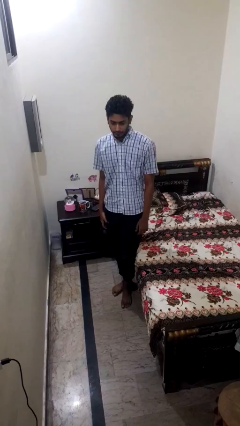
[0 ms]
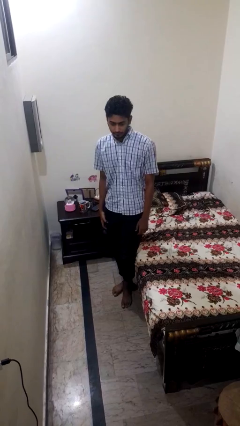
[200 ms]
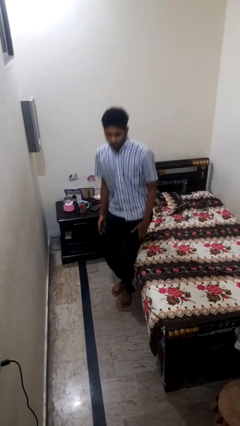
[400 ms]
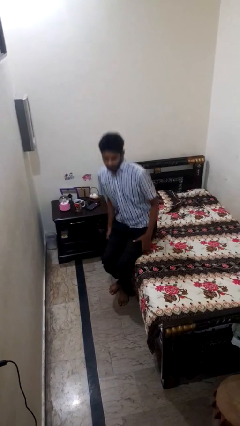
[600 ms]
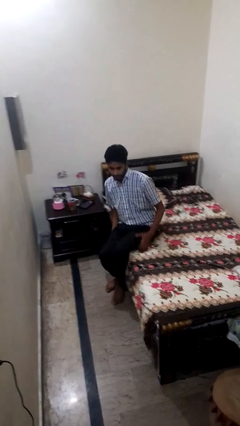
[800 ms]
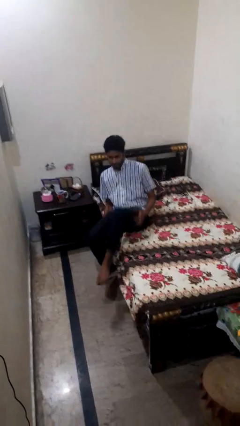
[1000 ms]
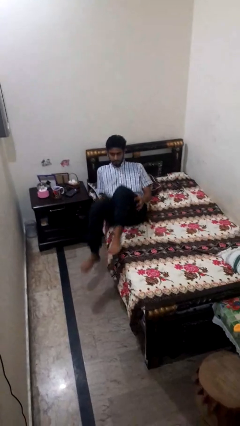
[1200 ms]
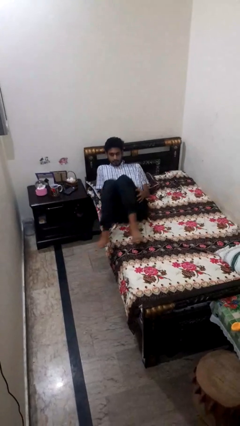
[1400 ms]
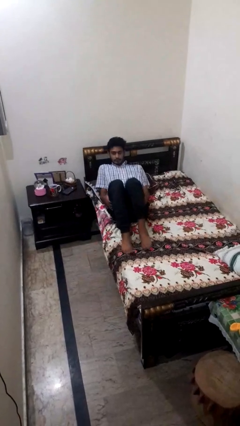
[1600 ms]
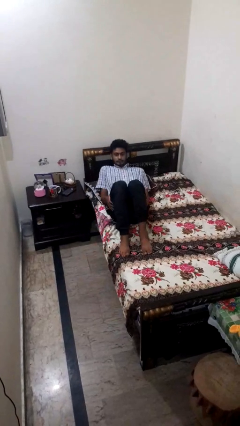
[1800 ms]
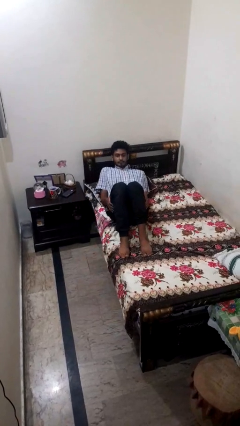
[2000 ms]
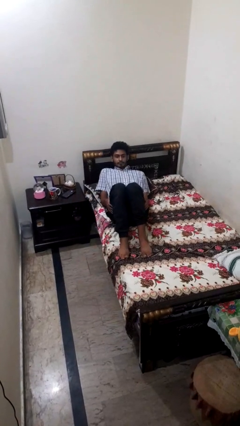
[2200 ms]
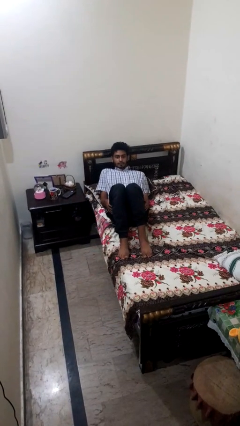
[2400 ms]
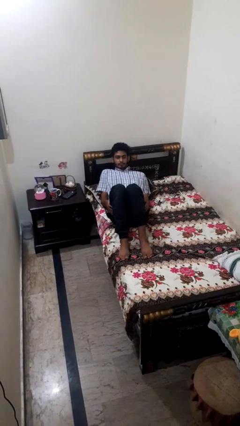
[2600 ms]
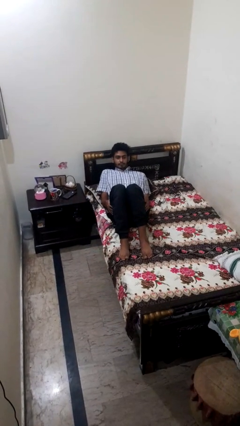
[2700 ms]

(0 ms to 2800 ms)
person lies down on bed

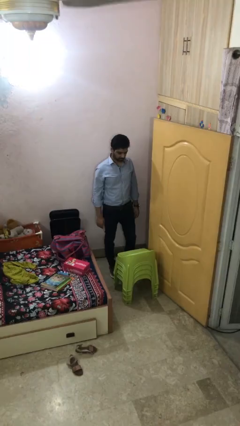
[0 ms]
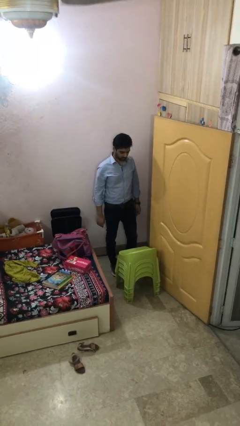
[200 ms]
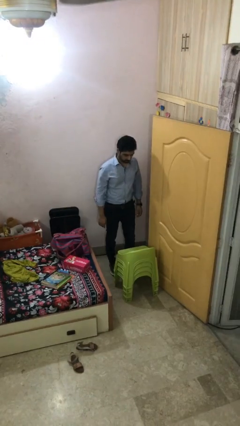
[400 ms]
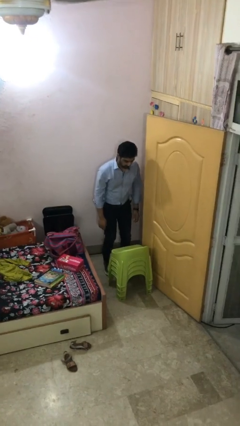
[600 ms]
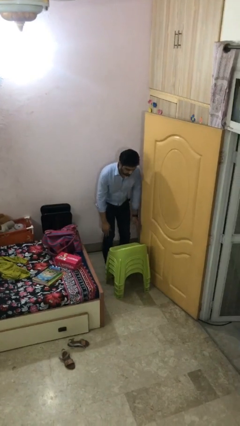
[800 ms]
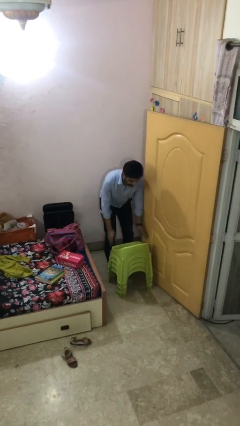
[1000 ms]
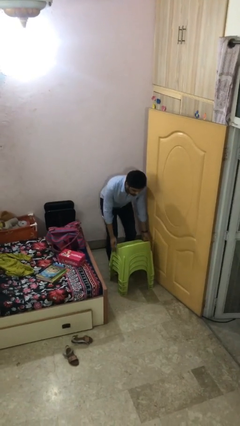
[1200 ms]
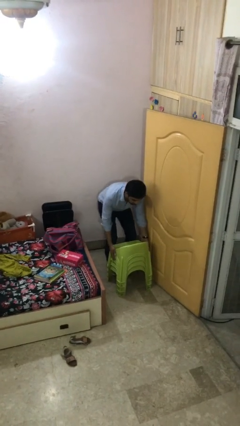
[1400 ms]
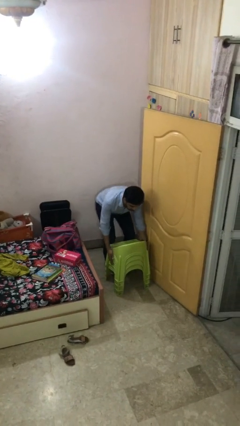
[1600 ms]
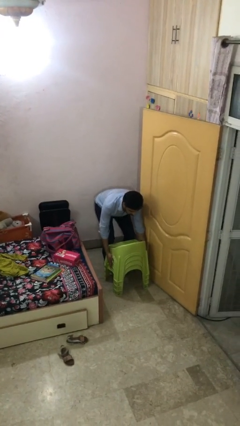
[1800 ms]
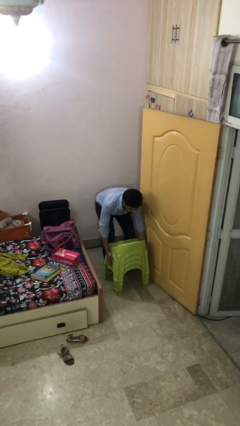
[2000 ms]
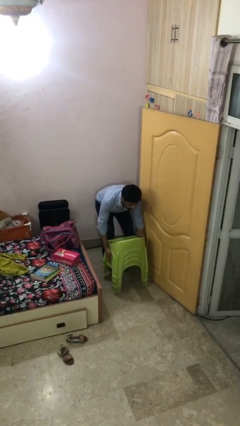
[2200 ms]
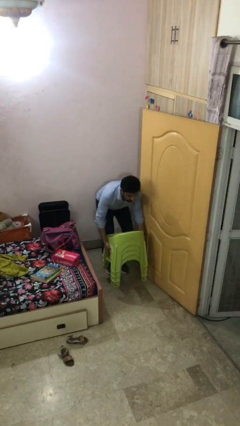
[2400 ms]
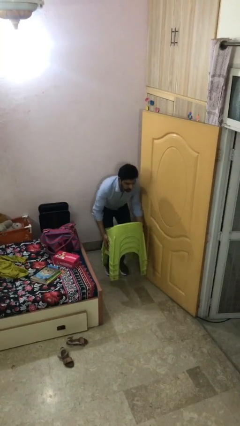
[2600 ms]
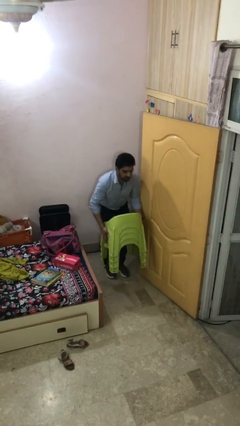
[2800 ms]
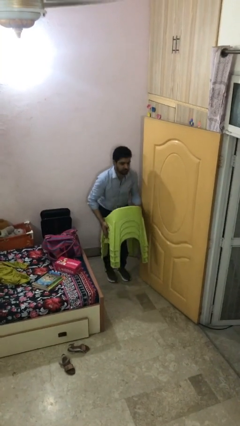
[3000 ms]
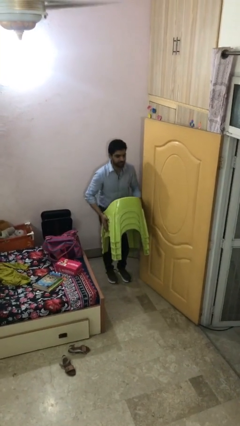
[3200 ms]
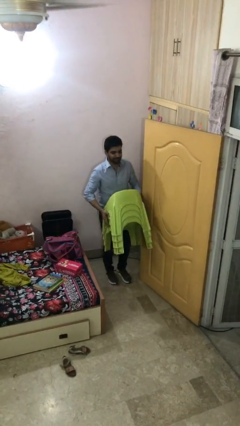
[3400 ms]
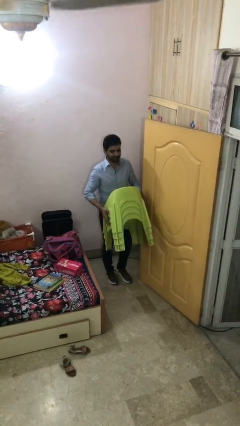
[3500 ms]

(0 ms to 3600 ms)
person picks up object from floor

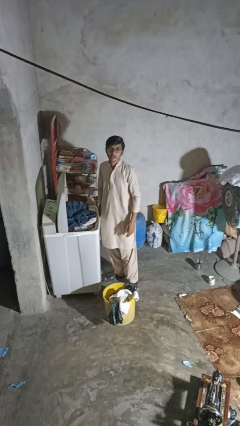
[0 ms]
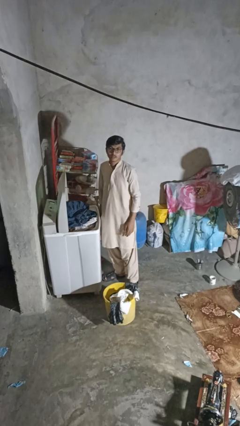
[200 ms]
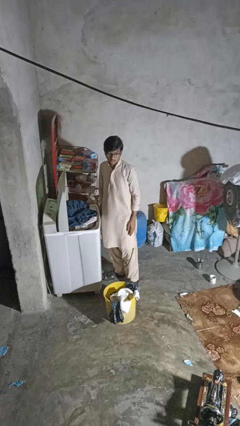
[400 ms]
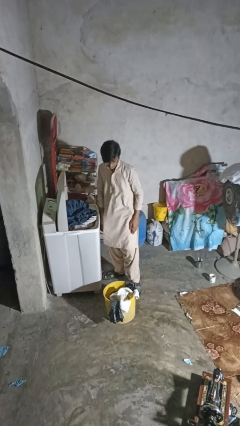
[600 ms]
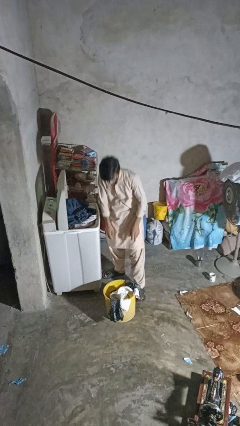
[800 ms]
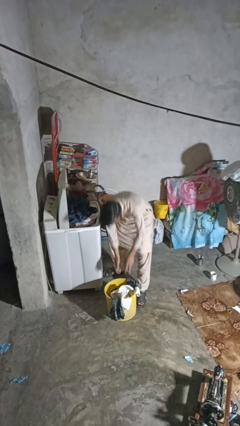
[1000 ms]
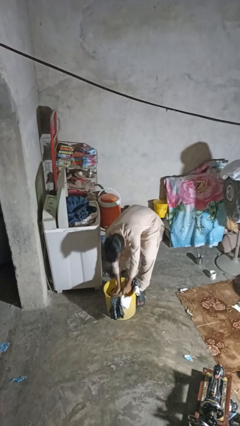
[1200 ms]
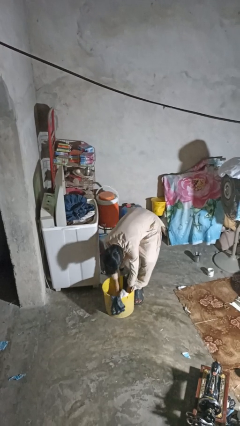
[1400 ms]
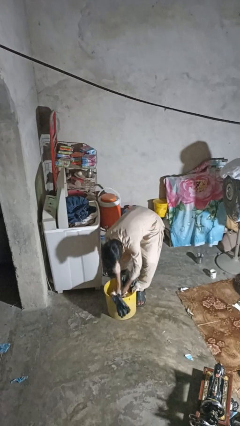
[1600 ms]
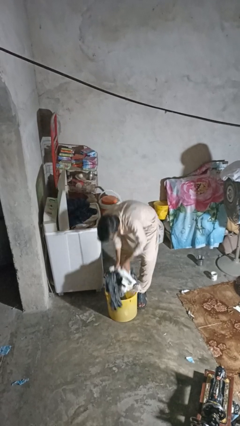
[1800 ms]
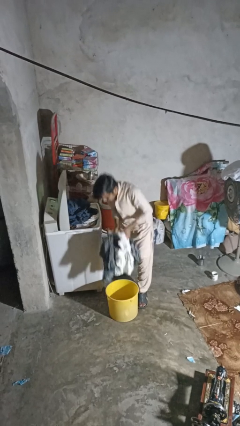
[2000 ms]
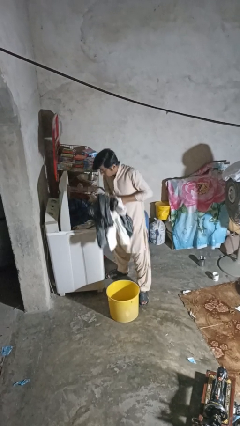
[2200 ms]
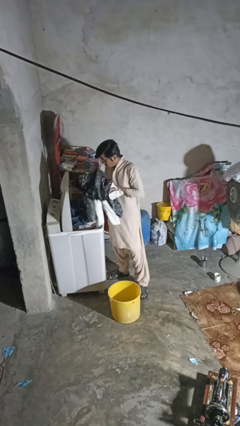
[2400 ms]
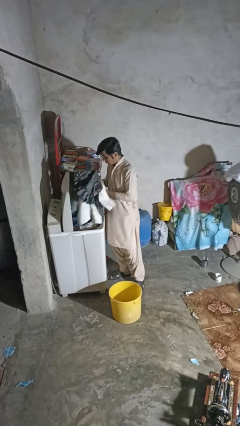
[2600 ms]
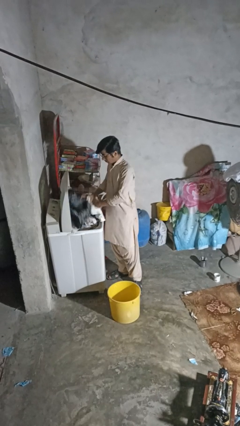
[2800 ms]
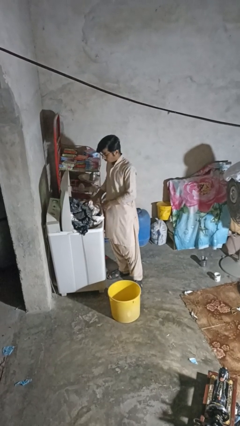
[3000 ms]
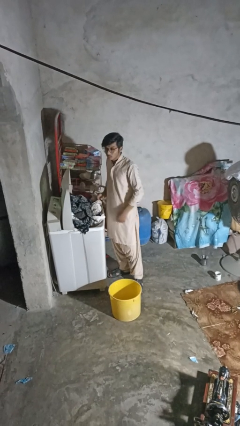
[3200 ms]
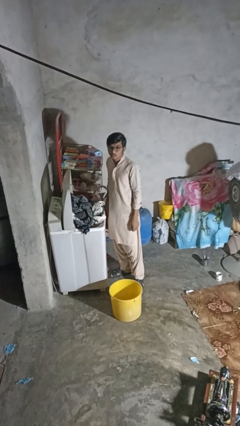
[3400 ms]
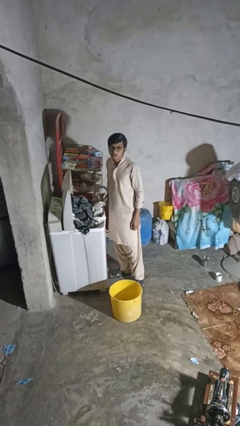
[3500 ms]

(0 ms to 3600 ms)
person loads clotheswasher

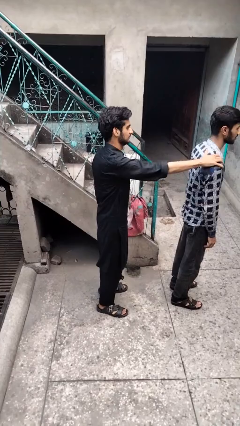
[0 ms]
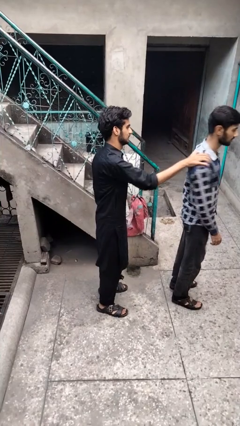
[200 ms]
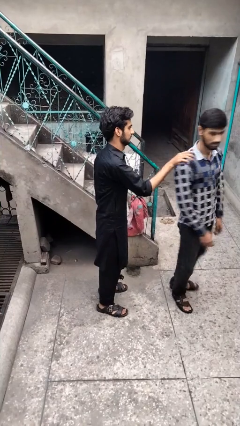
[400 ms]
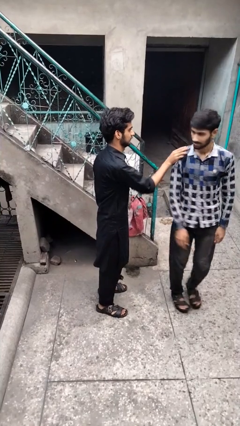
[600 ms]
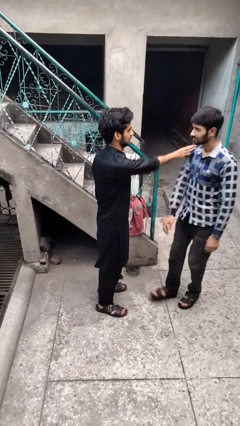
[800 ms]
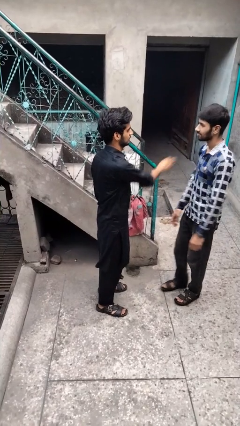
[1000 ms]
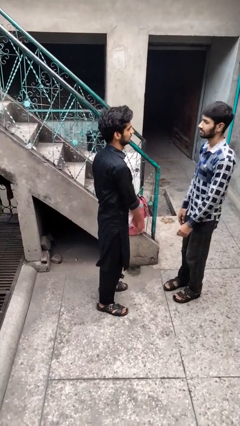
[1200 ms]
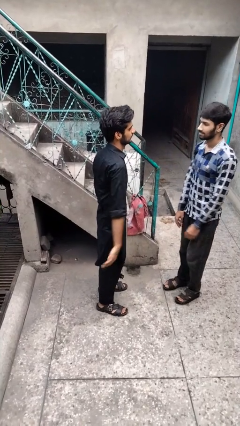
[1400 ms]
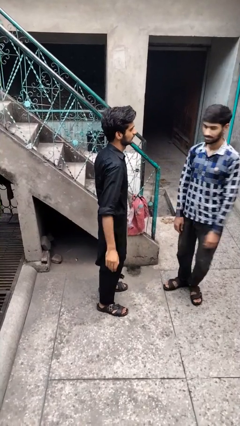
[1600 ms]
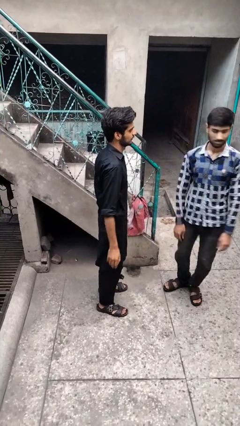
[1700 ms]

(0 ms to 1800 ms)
person spins person around

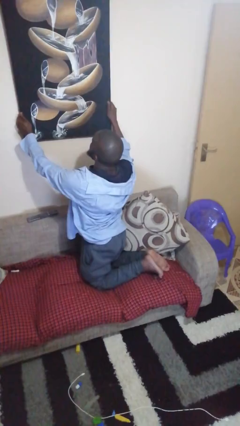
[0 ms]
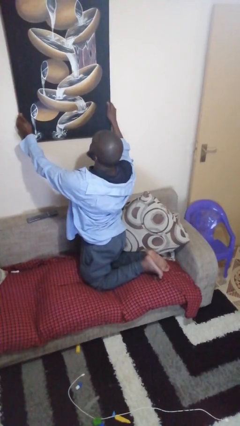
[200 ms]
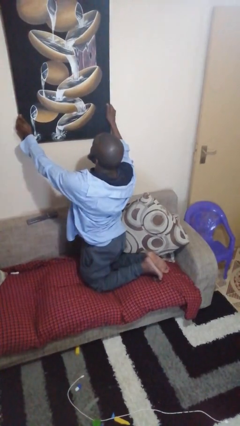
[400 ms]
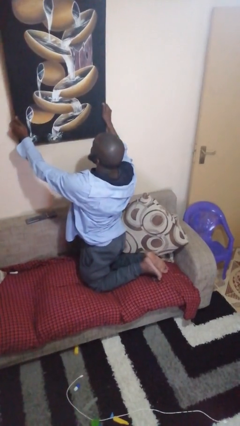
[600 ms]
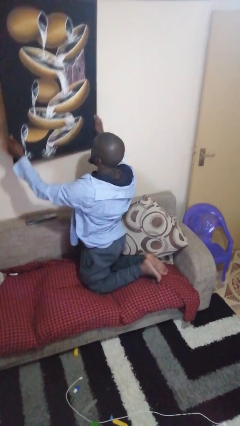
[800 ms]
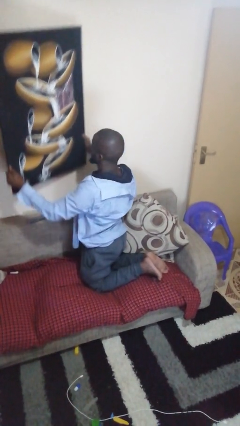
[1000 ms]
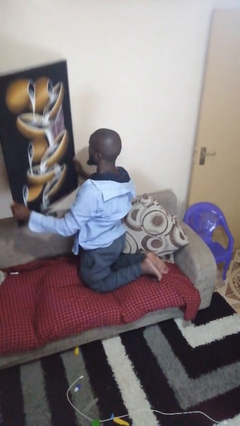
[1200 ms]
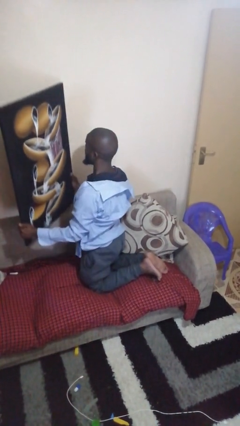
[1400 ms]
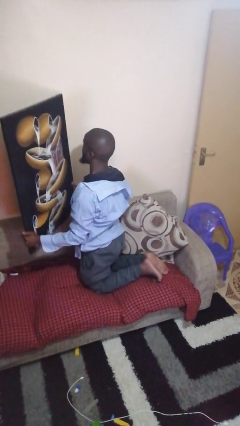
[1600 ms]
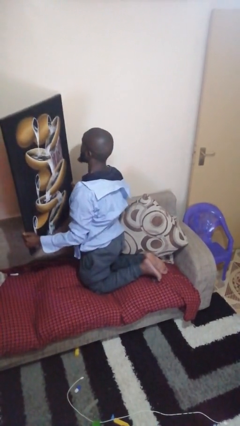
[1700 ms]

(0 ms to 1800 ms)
person takes down picture frame

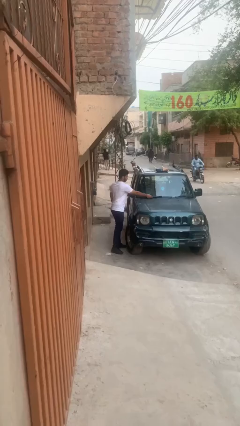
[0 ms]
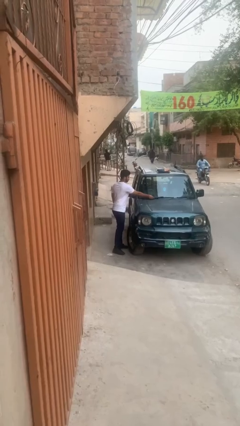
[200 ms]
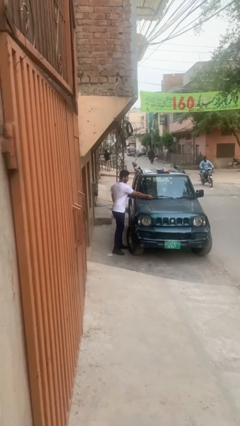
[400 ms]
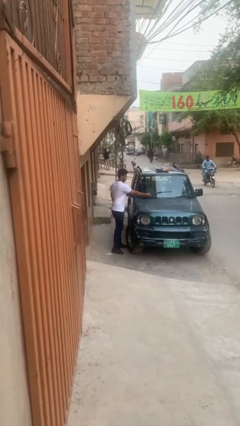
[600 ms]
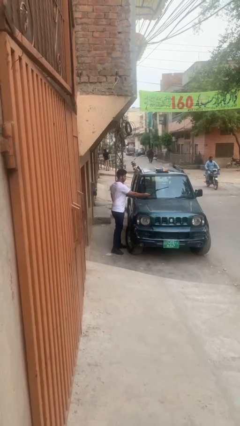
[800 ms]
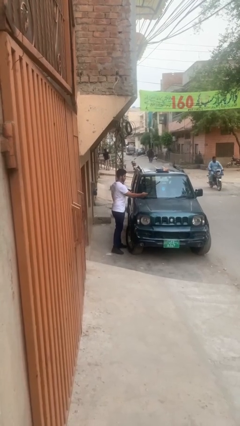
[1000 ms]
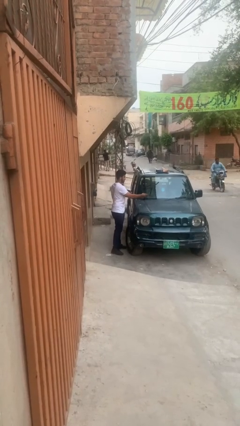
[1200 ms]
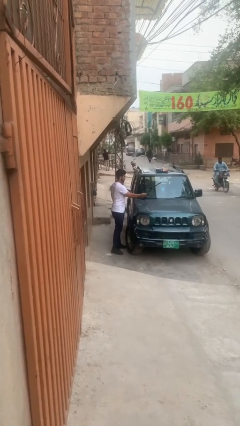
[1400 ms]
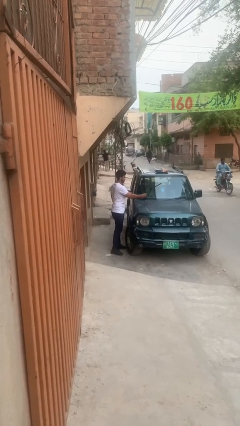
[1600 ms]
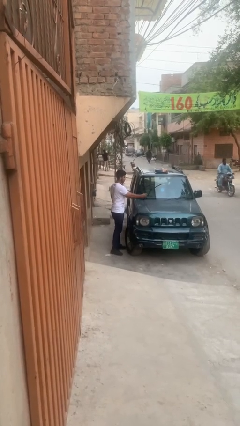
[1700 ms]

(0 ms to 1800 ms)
person flips up car wipers

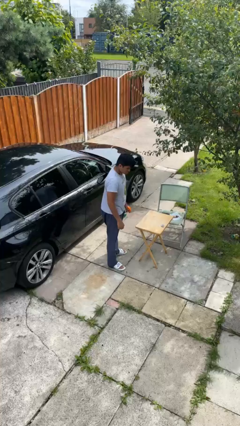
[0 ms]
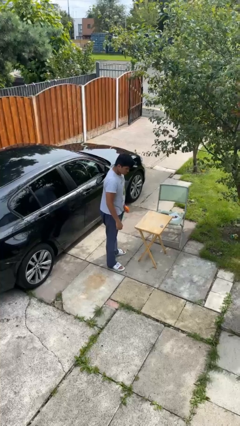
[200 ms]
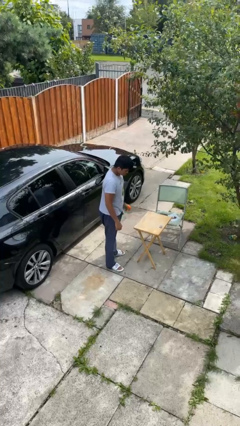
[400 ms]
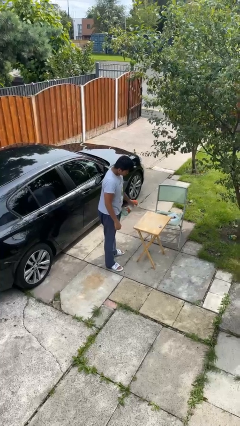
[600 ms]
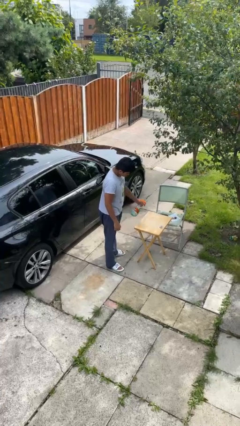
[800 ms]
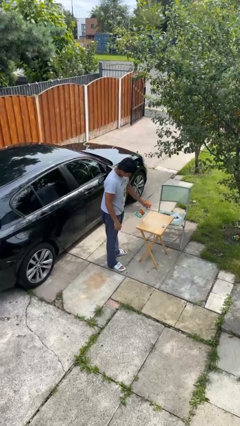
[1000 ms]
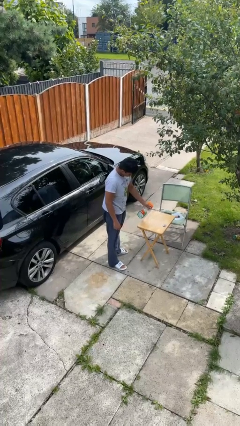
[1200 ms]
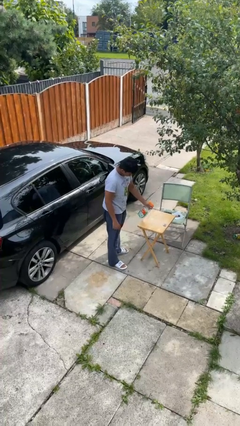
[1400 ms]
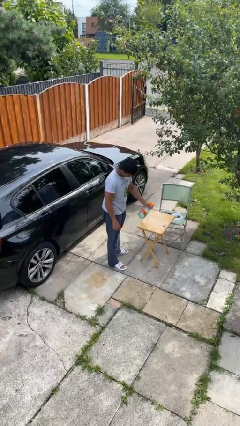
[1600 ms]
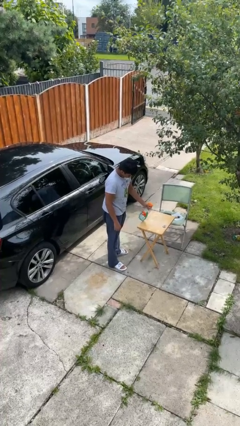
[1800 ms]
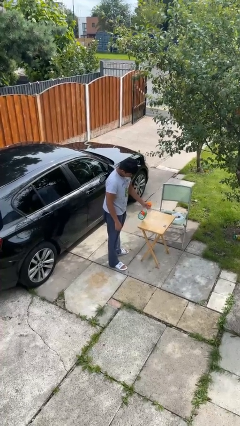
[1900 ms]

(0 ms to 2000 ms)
person sprays from bottle
